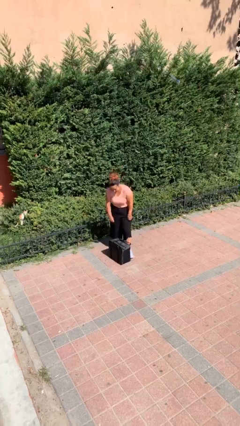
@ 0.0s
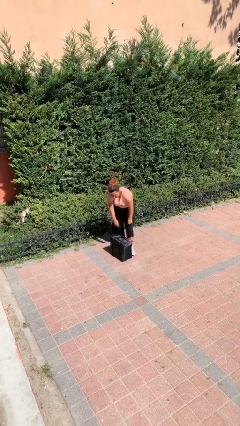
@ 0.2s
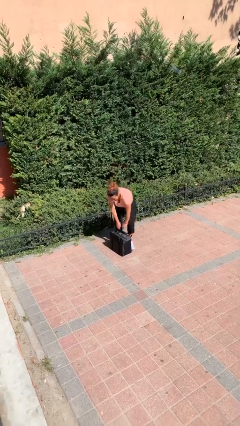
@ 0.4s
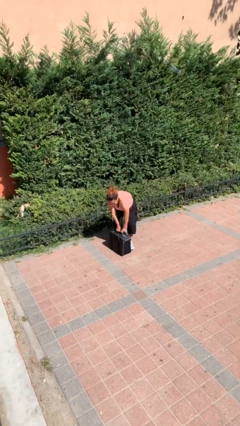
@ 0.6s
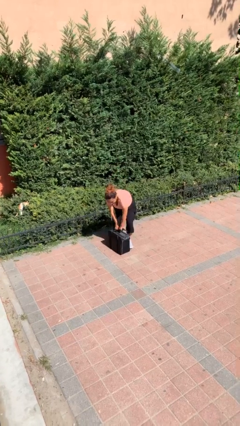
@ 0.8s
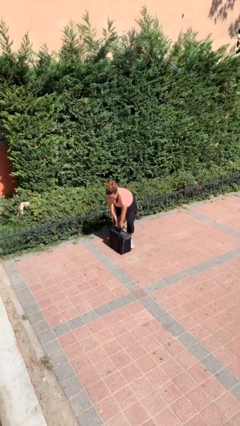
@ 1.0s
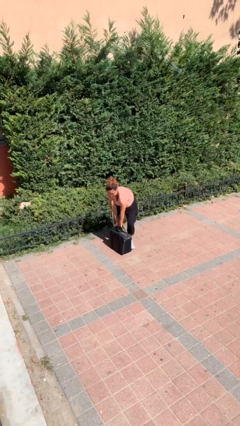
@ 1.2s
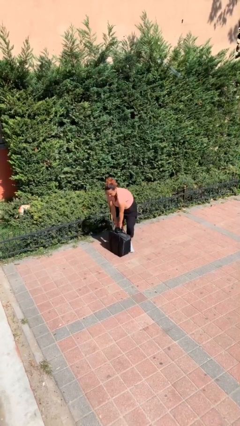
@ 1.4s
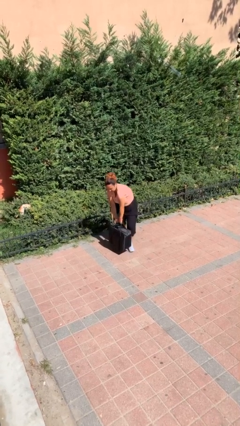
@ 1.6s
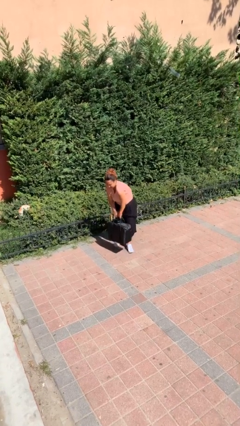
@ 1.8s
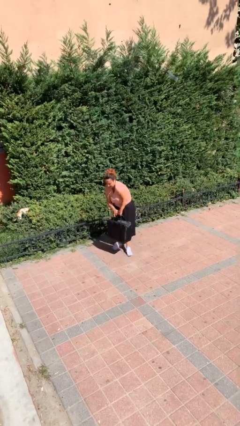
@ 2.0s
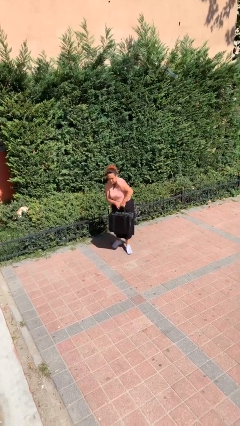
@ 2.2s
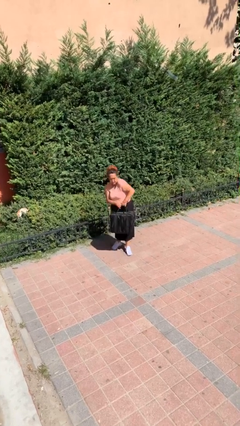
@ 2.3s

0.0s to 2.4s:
person picks up object from floor

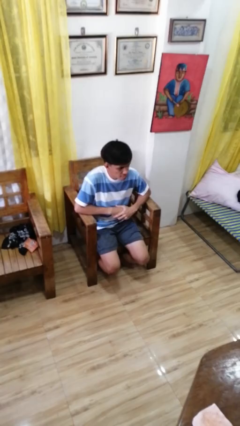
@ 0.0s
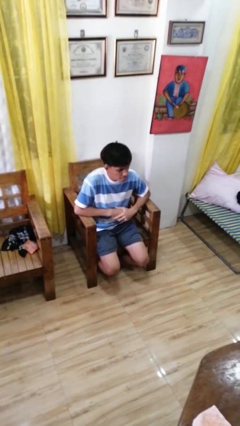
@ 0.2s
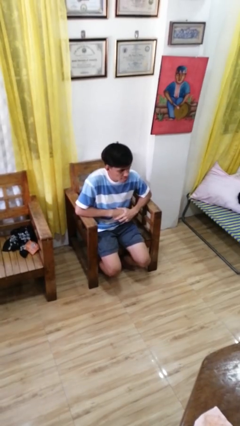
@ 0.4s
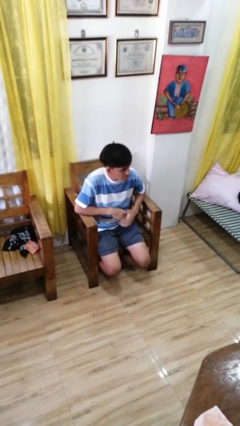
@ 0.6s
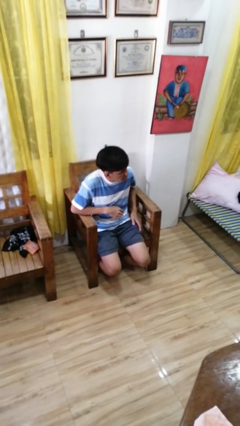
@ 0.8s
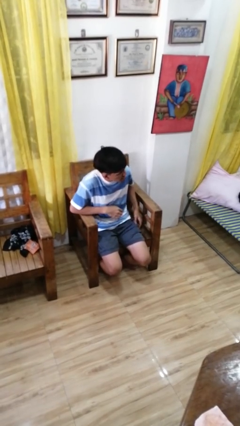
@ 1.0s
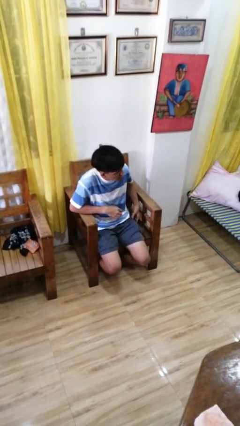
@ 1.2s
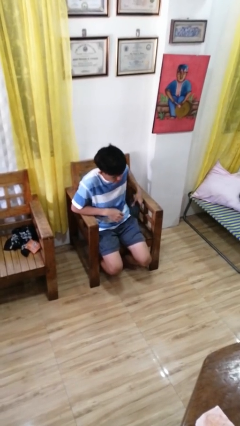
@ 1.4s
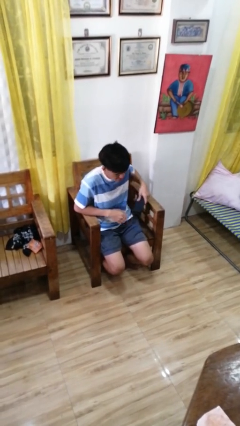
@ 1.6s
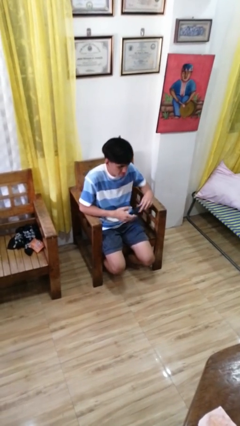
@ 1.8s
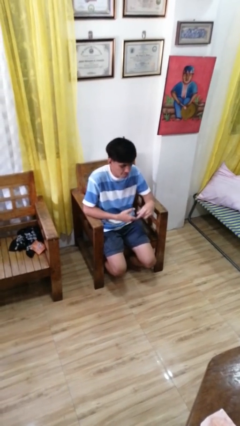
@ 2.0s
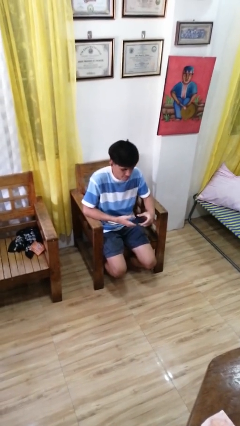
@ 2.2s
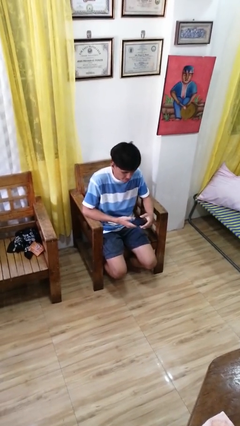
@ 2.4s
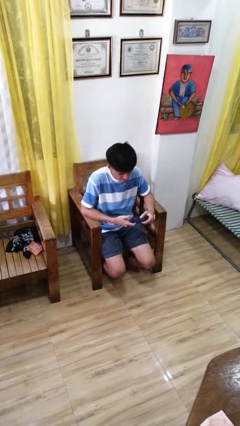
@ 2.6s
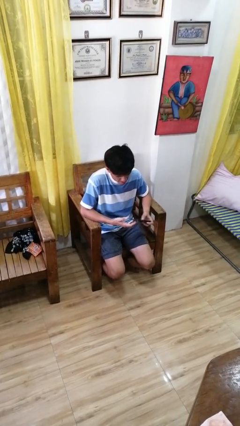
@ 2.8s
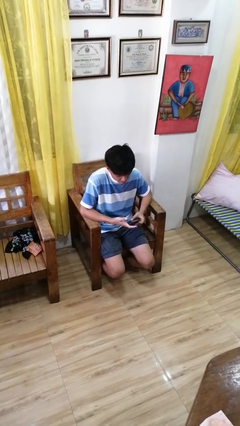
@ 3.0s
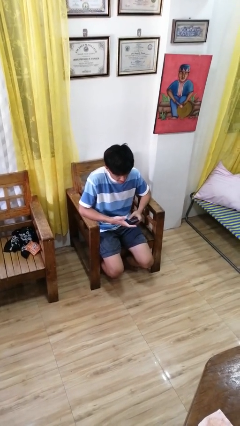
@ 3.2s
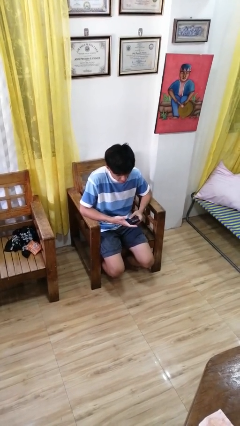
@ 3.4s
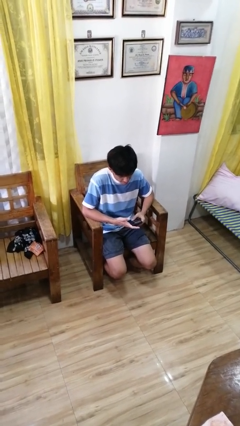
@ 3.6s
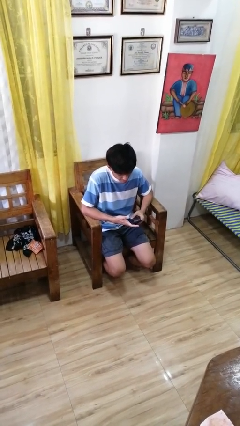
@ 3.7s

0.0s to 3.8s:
person takes phone from pocket

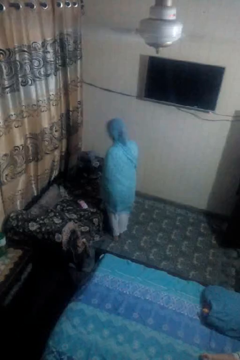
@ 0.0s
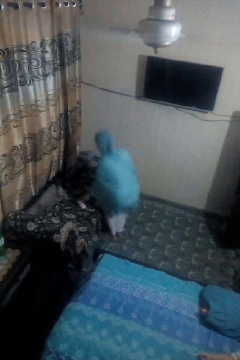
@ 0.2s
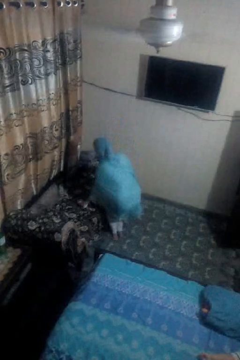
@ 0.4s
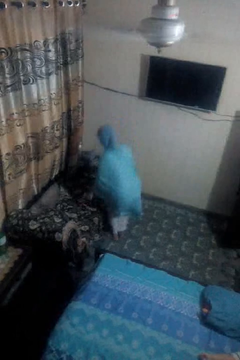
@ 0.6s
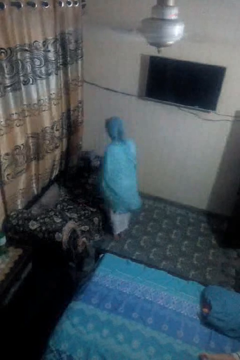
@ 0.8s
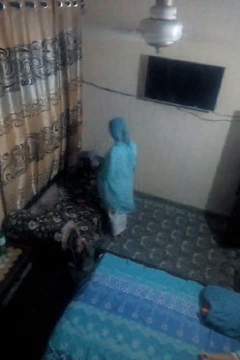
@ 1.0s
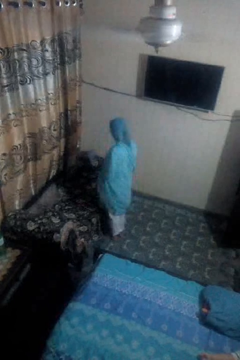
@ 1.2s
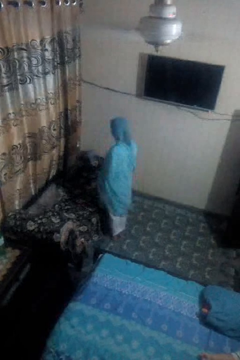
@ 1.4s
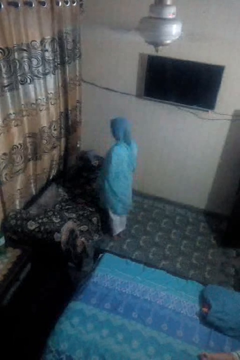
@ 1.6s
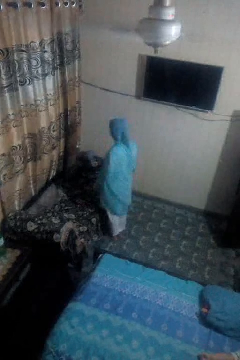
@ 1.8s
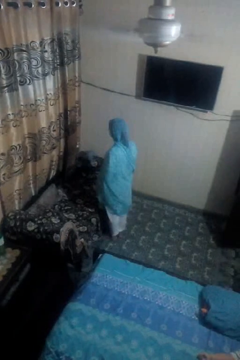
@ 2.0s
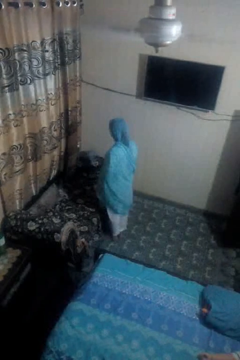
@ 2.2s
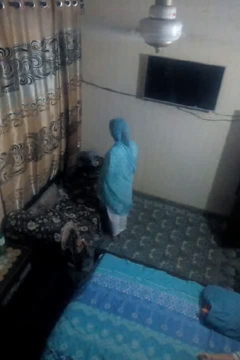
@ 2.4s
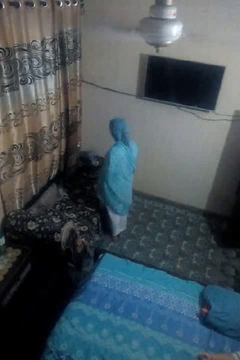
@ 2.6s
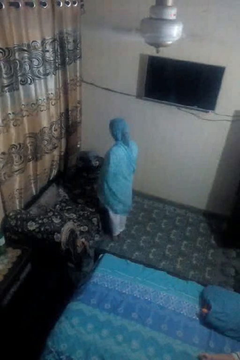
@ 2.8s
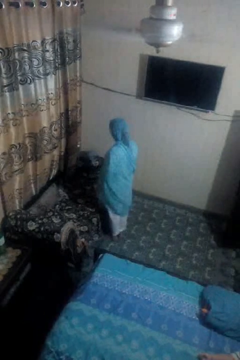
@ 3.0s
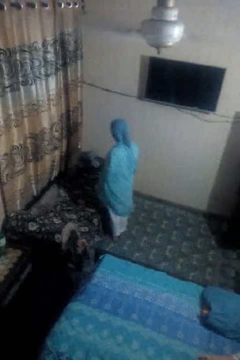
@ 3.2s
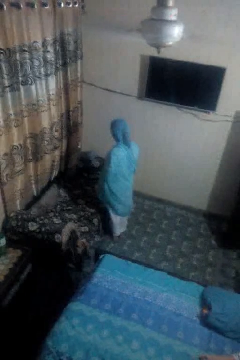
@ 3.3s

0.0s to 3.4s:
person picks up object from couch

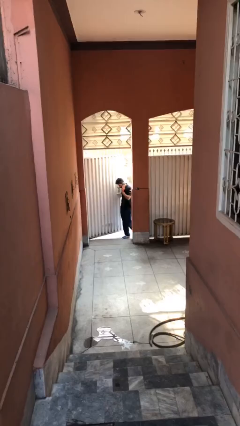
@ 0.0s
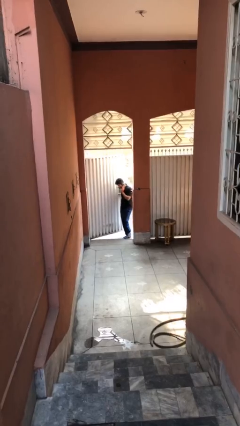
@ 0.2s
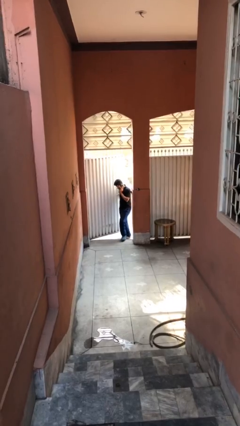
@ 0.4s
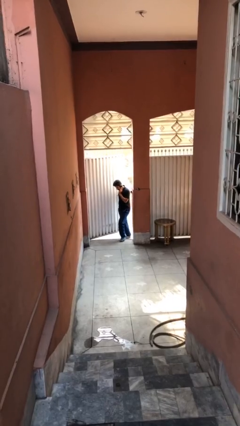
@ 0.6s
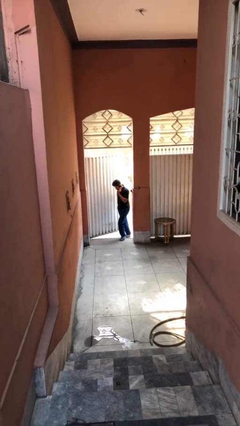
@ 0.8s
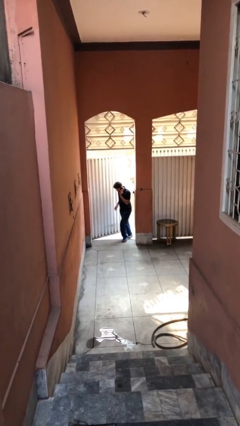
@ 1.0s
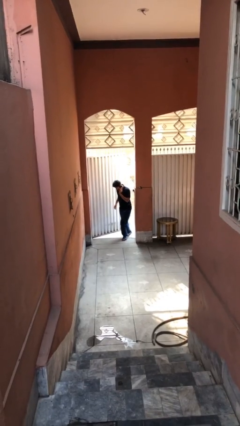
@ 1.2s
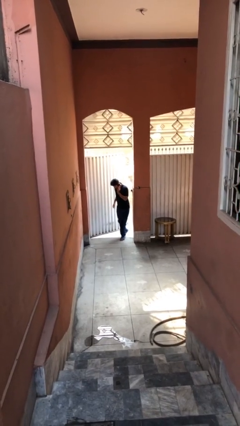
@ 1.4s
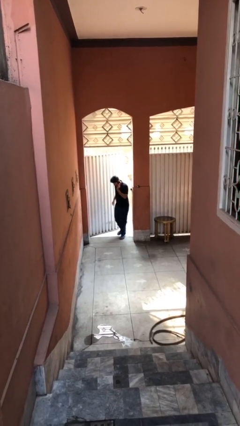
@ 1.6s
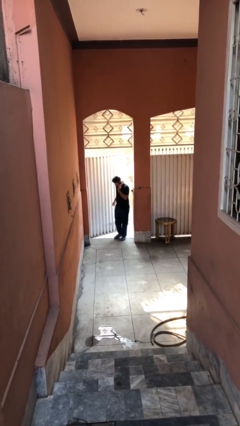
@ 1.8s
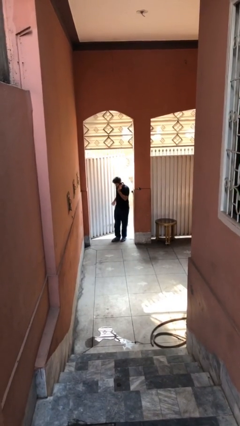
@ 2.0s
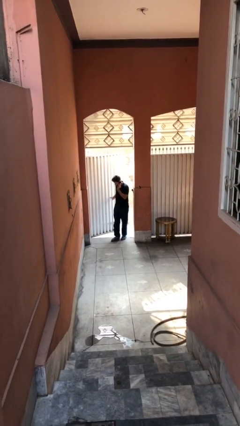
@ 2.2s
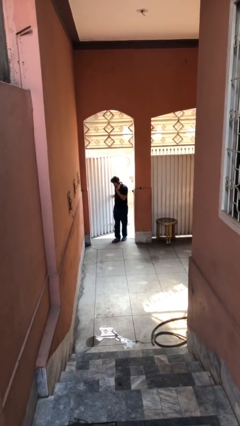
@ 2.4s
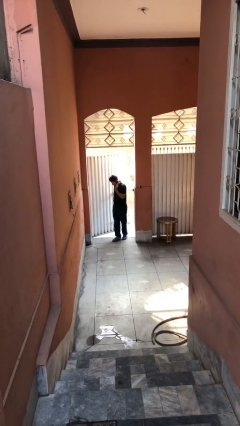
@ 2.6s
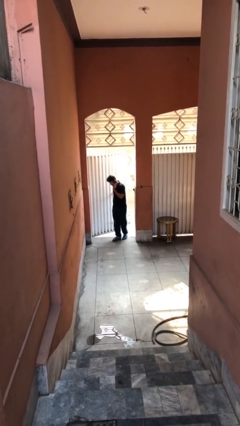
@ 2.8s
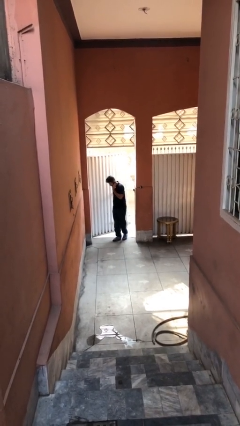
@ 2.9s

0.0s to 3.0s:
person enters scene through structure

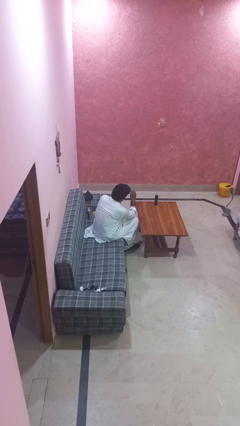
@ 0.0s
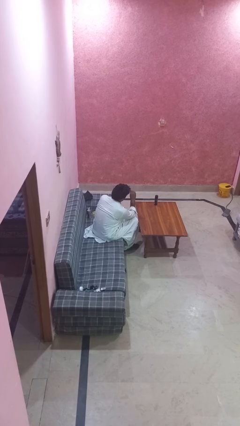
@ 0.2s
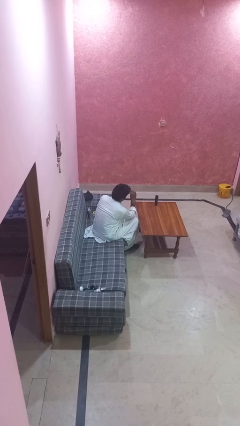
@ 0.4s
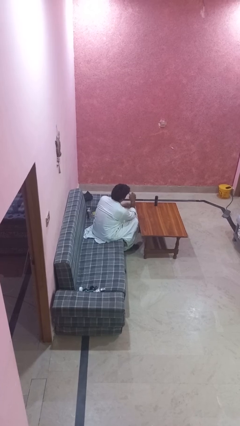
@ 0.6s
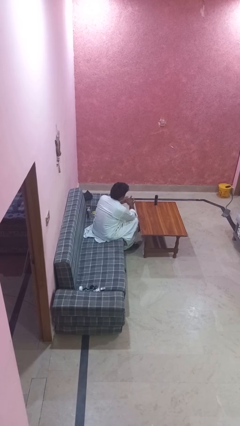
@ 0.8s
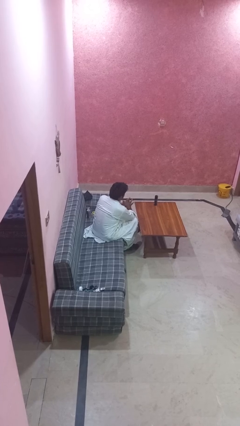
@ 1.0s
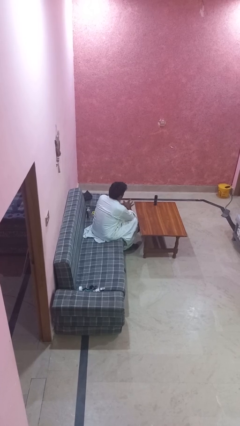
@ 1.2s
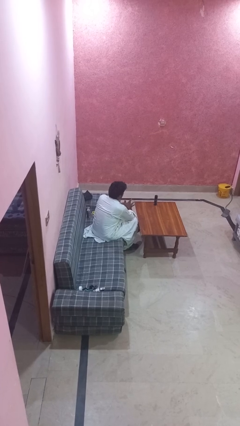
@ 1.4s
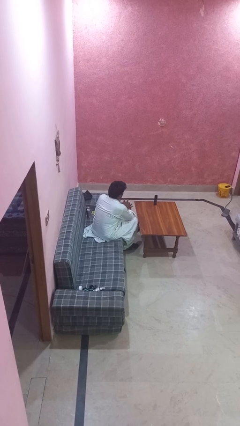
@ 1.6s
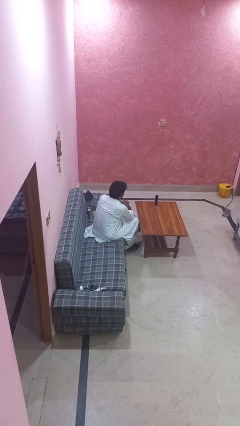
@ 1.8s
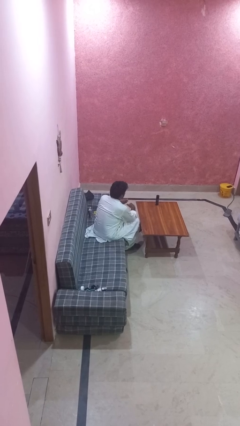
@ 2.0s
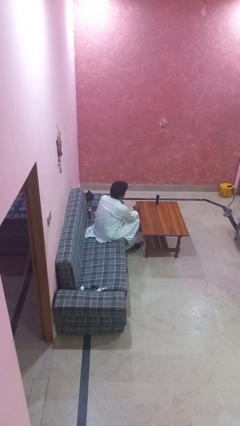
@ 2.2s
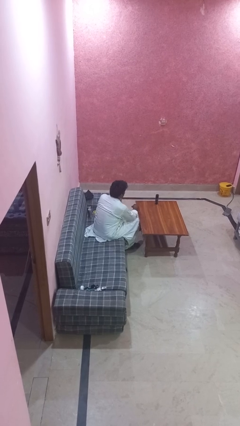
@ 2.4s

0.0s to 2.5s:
person takes off ring

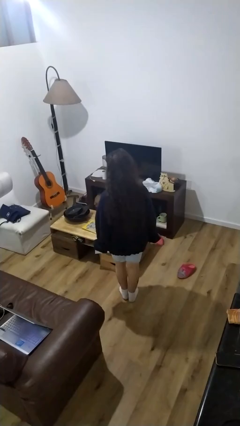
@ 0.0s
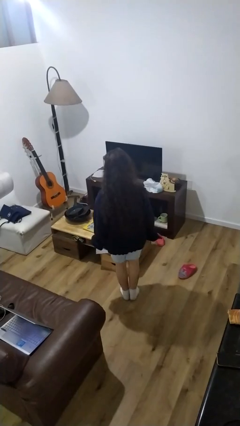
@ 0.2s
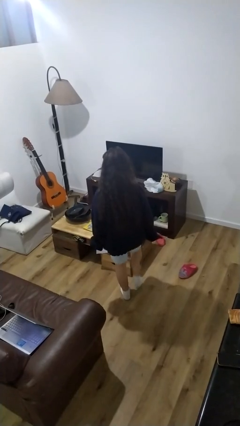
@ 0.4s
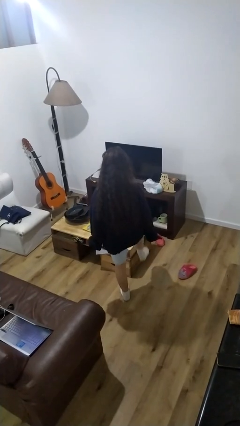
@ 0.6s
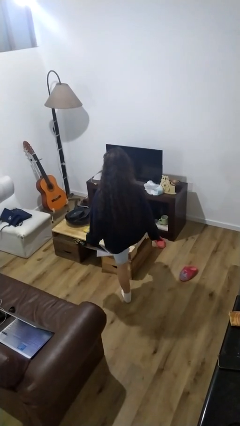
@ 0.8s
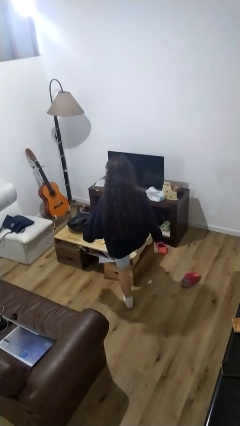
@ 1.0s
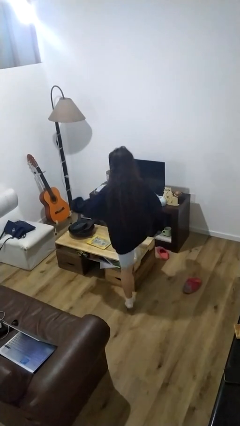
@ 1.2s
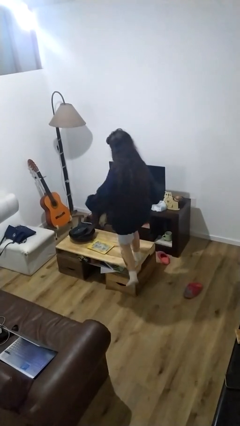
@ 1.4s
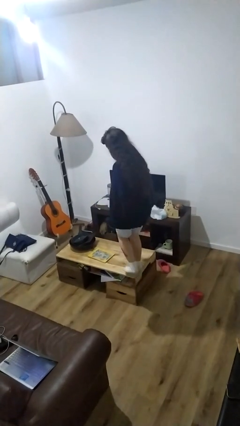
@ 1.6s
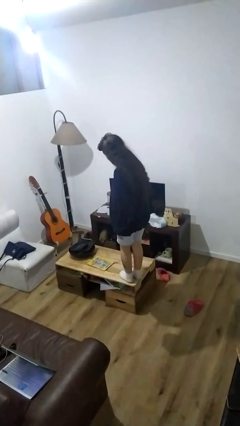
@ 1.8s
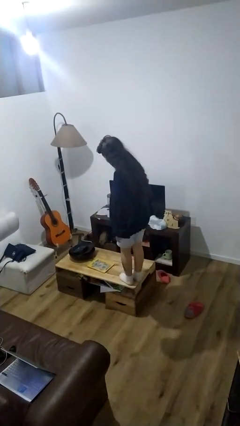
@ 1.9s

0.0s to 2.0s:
person climbs on table

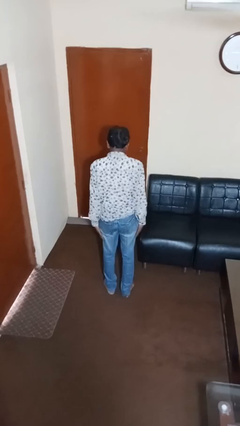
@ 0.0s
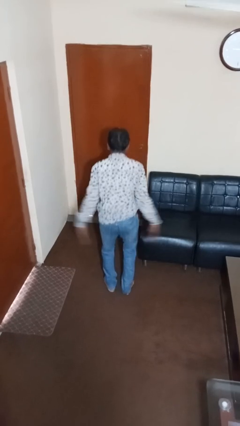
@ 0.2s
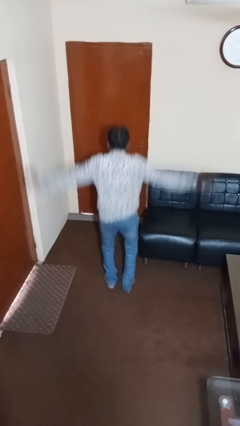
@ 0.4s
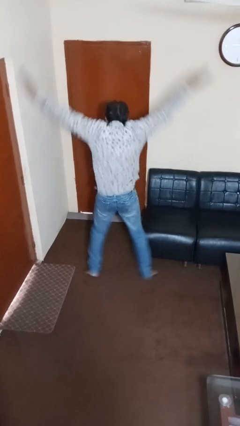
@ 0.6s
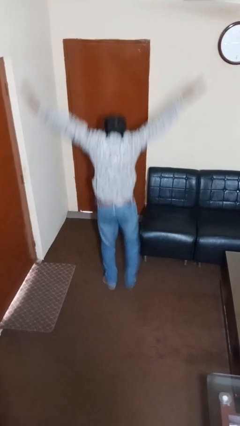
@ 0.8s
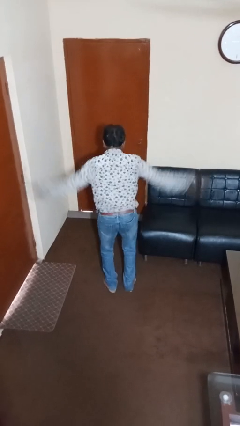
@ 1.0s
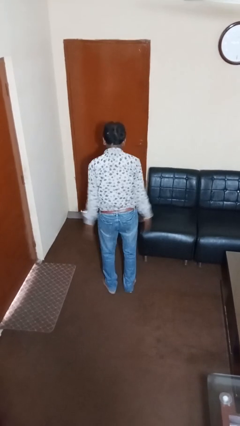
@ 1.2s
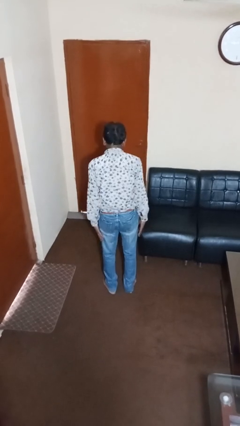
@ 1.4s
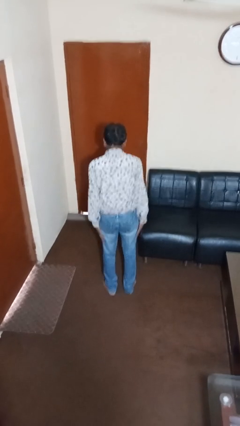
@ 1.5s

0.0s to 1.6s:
person exercises with jumping jacks
